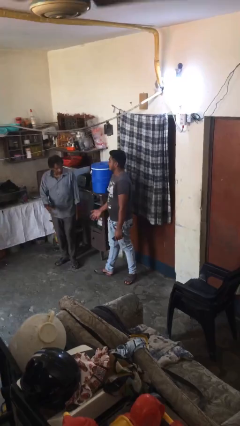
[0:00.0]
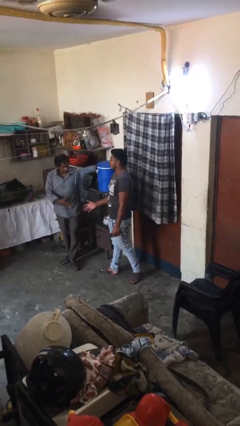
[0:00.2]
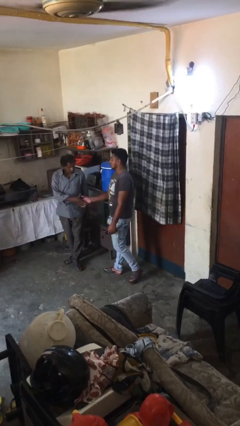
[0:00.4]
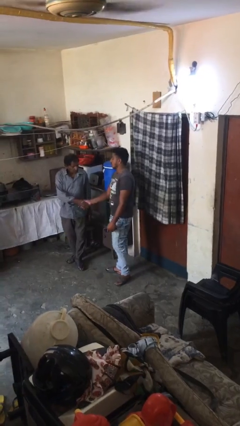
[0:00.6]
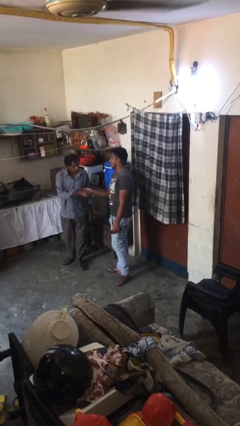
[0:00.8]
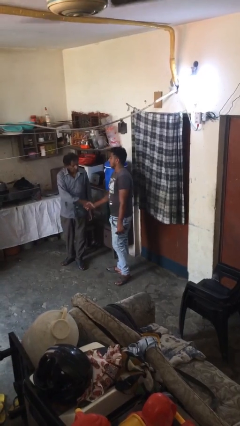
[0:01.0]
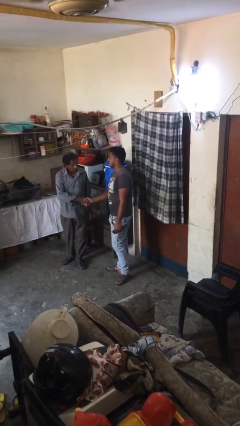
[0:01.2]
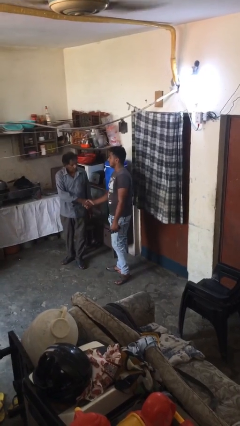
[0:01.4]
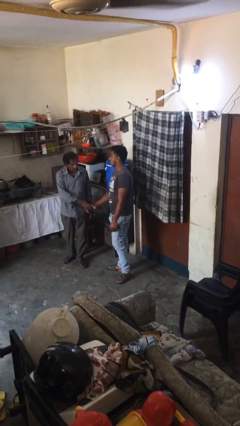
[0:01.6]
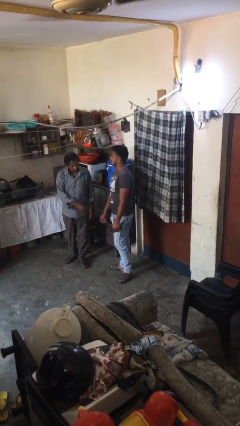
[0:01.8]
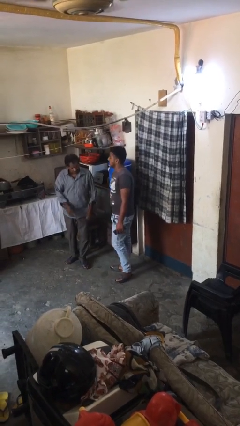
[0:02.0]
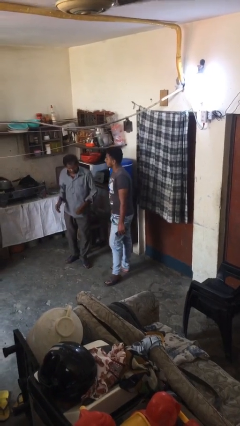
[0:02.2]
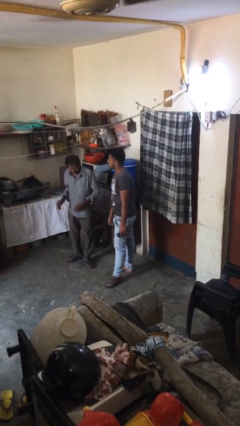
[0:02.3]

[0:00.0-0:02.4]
person shakes hand

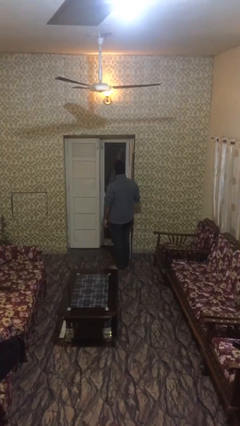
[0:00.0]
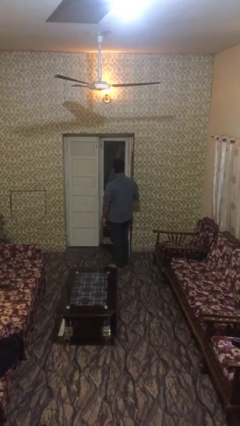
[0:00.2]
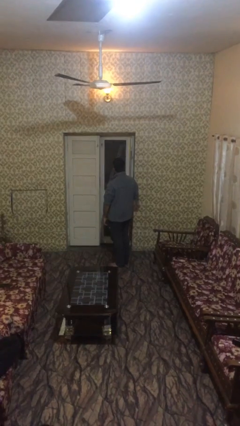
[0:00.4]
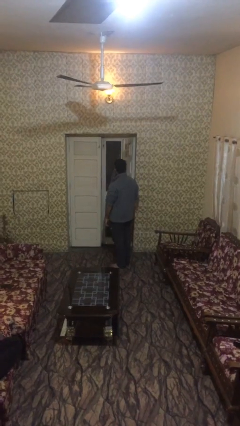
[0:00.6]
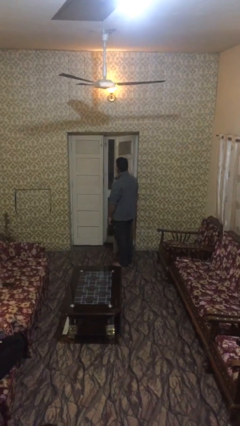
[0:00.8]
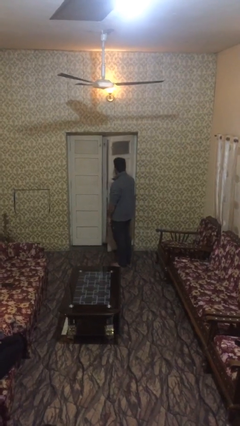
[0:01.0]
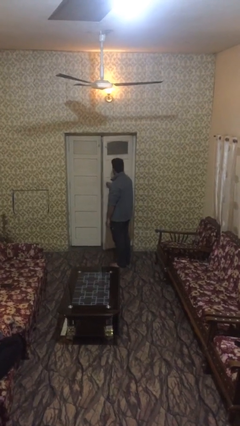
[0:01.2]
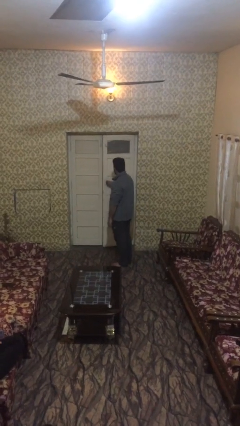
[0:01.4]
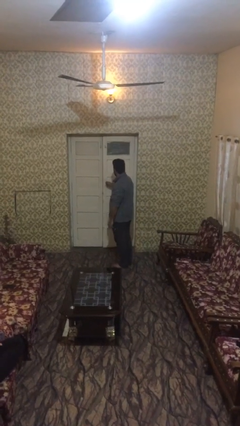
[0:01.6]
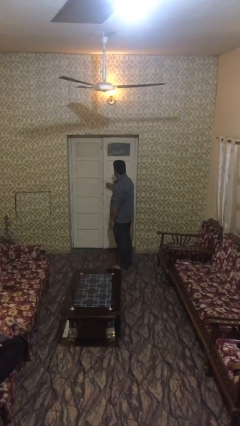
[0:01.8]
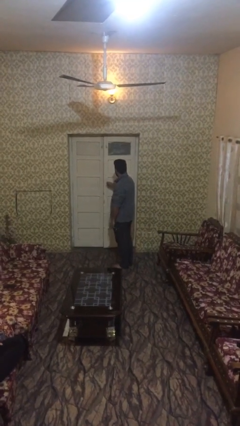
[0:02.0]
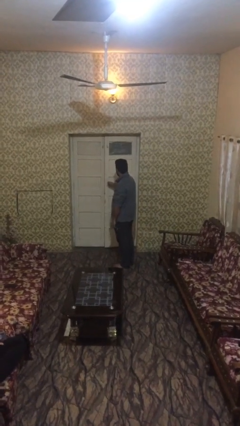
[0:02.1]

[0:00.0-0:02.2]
person closes facility door

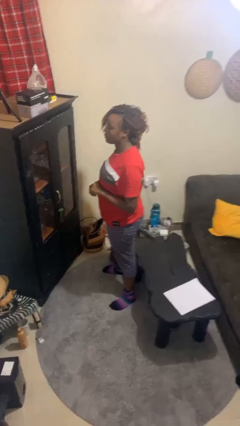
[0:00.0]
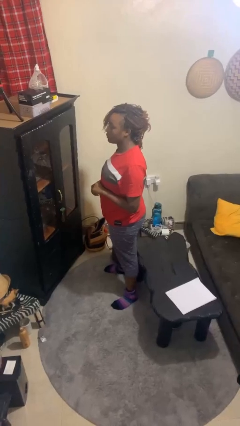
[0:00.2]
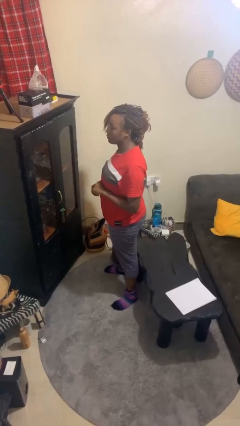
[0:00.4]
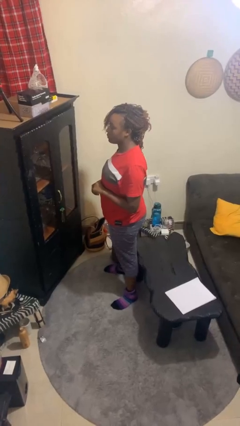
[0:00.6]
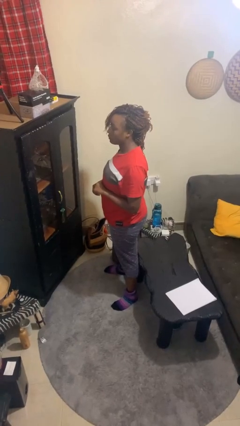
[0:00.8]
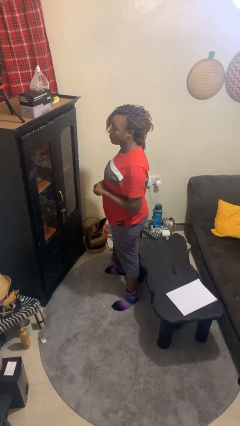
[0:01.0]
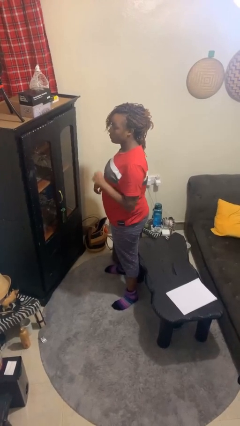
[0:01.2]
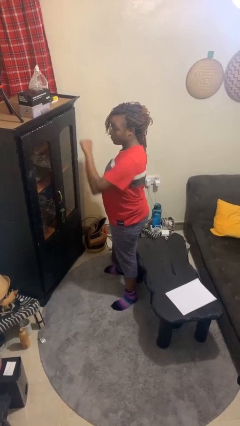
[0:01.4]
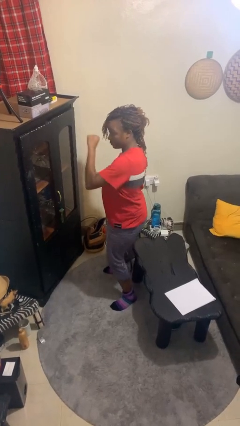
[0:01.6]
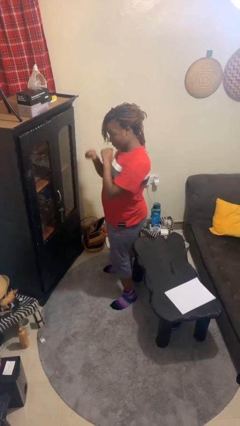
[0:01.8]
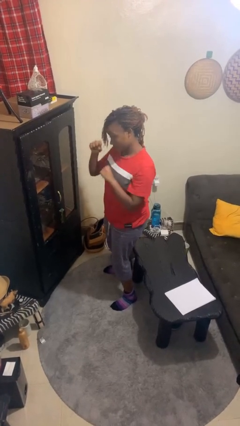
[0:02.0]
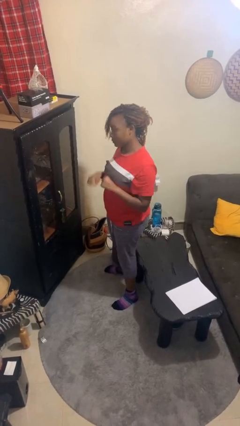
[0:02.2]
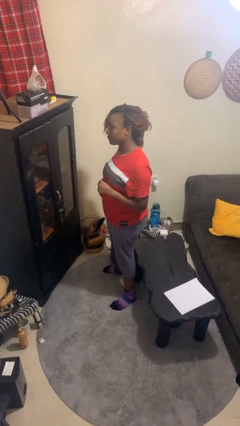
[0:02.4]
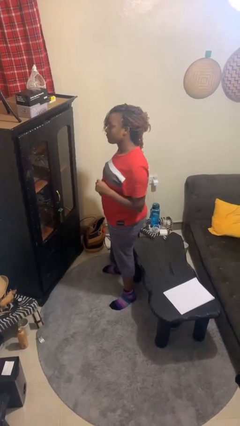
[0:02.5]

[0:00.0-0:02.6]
person punches

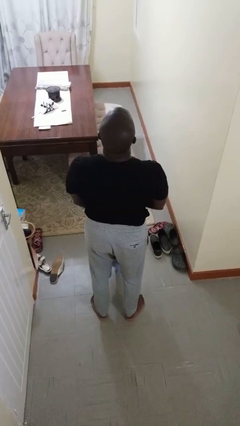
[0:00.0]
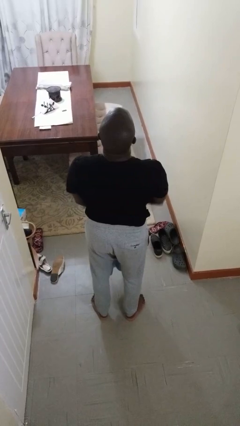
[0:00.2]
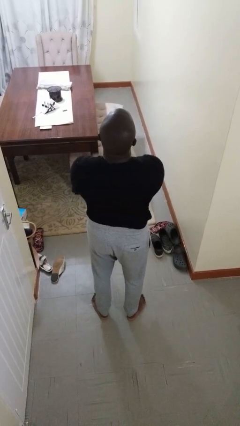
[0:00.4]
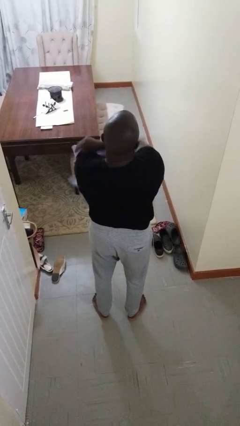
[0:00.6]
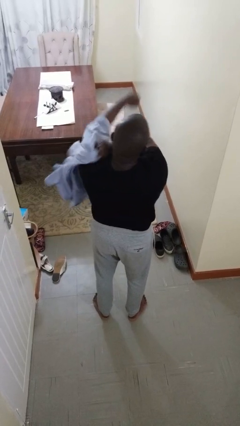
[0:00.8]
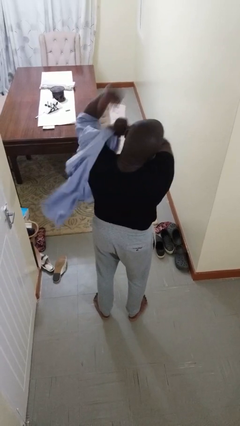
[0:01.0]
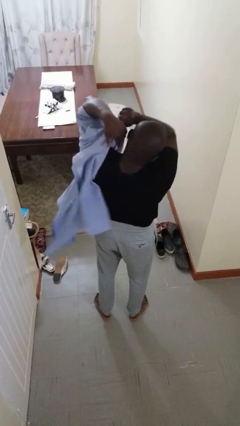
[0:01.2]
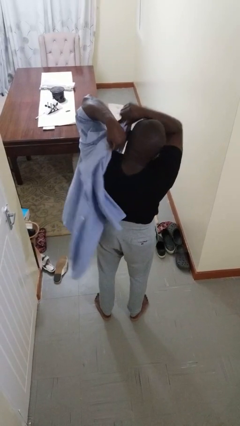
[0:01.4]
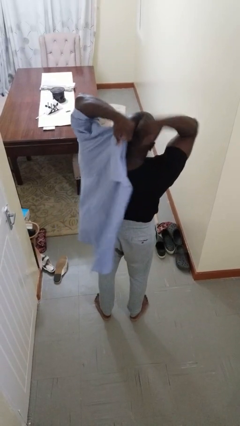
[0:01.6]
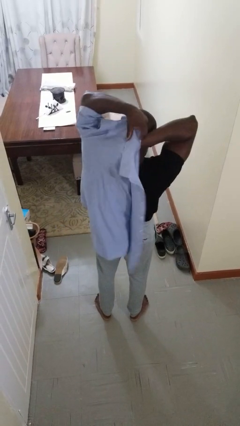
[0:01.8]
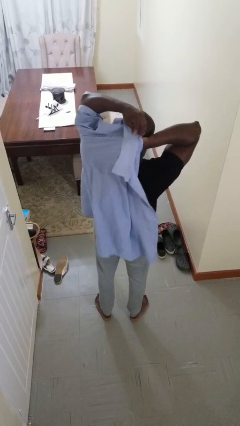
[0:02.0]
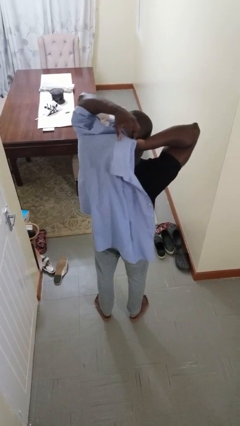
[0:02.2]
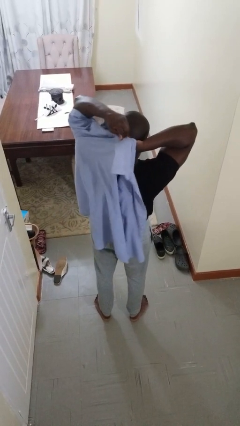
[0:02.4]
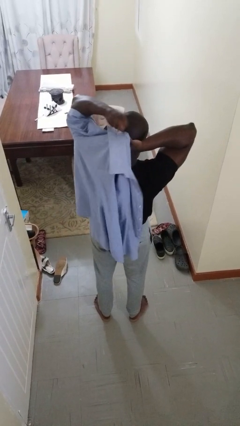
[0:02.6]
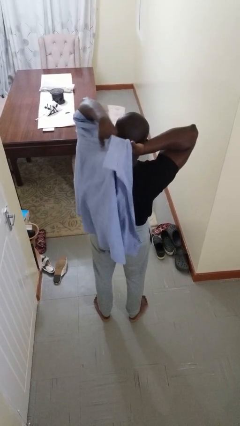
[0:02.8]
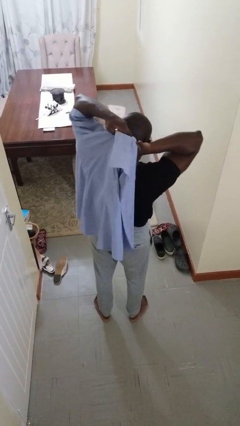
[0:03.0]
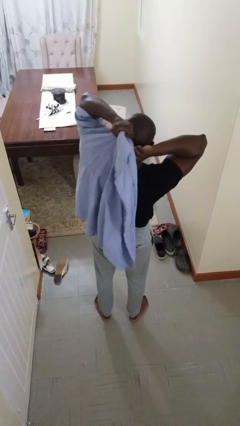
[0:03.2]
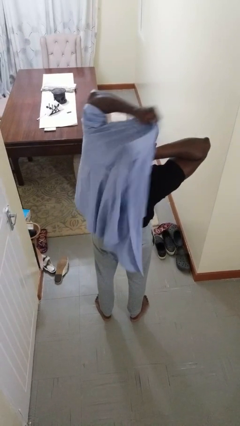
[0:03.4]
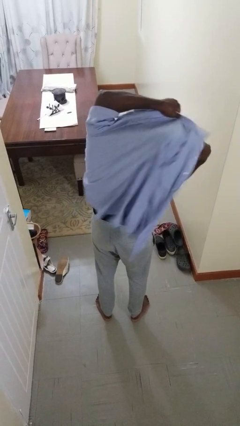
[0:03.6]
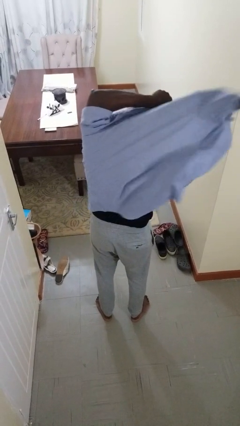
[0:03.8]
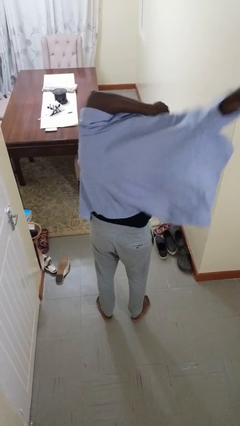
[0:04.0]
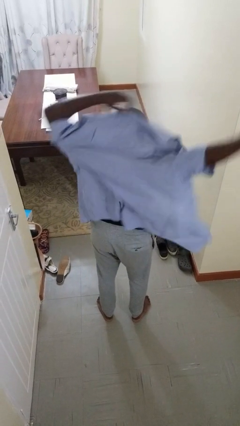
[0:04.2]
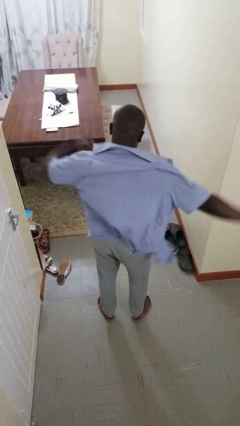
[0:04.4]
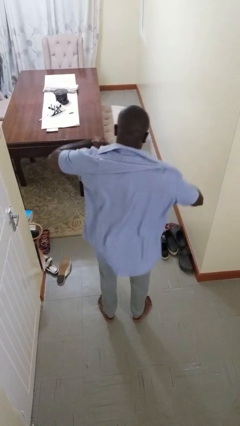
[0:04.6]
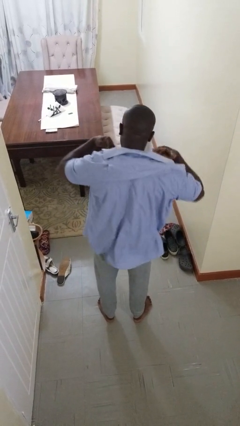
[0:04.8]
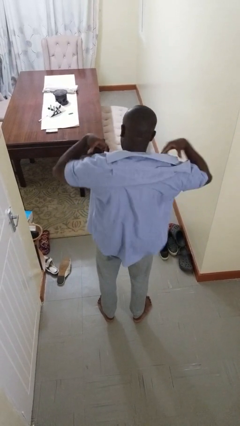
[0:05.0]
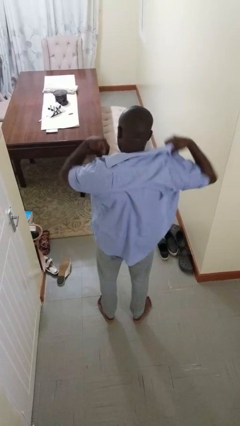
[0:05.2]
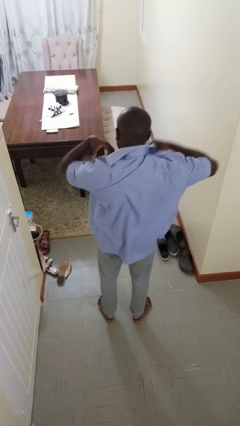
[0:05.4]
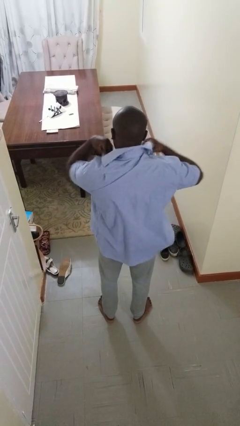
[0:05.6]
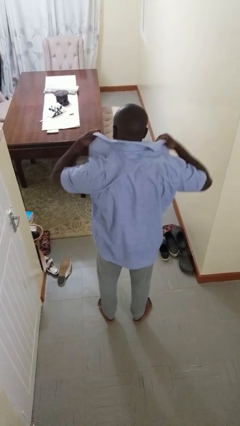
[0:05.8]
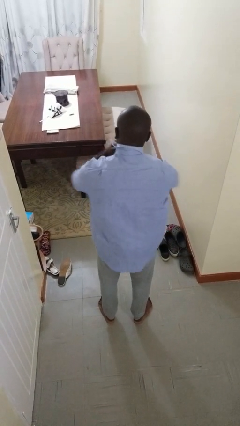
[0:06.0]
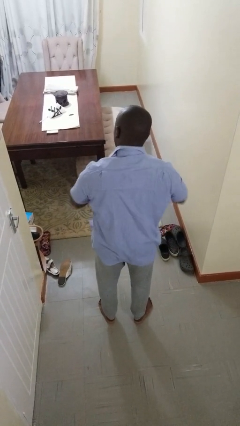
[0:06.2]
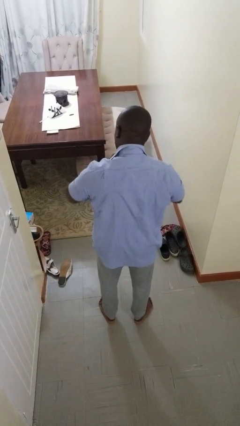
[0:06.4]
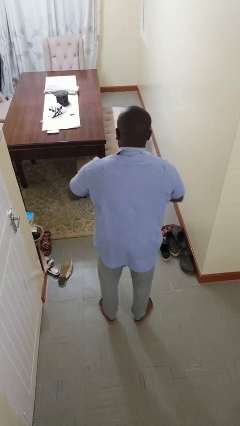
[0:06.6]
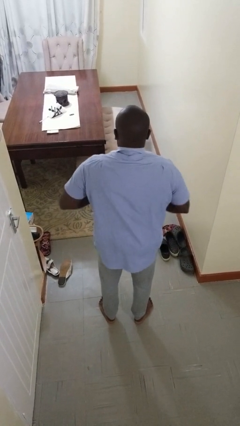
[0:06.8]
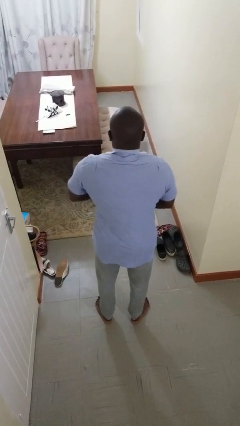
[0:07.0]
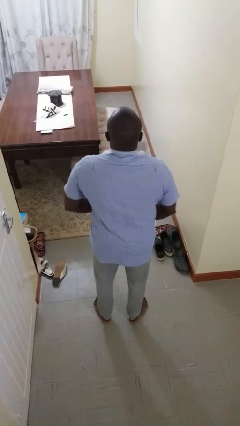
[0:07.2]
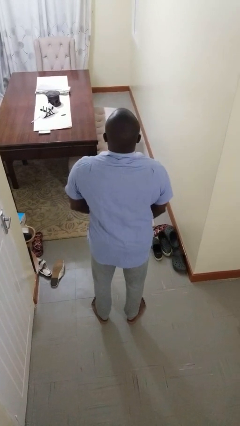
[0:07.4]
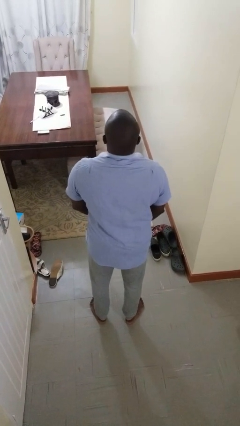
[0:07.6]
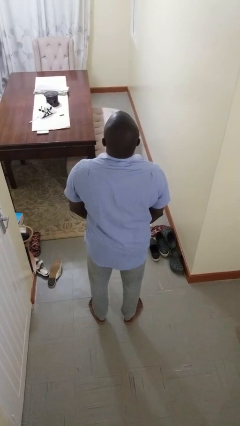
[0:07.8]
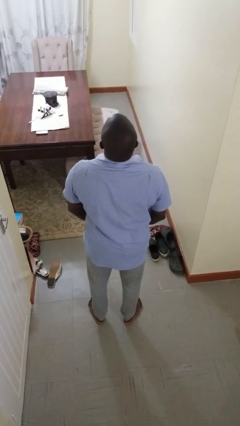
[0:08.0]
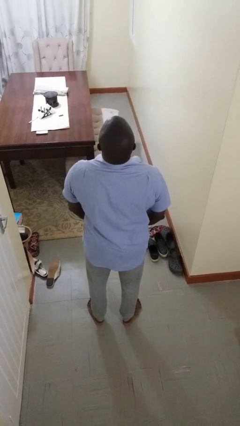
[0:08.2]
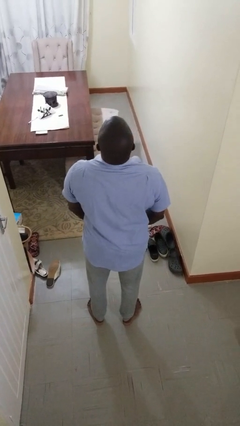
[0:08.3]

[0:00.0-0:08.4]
person puts on shirt

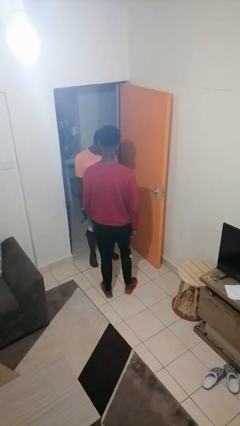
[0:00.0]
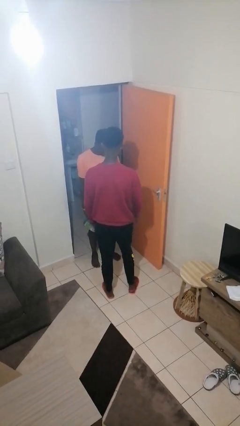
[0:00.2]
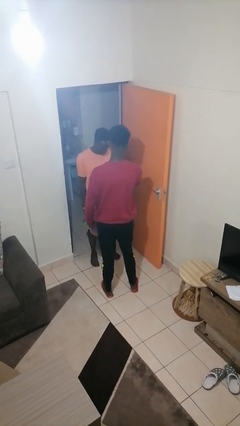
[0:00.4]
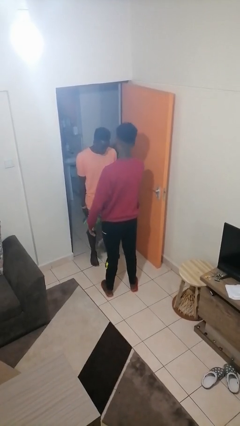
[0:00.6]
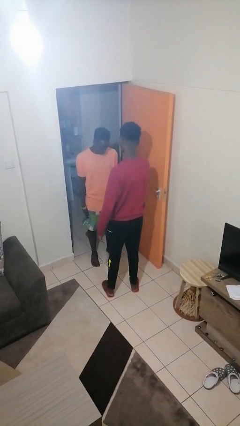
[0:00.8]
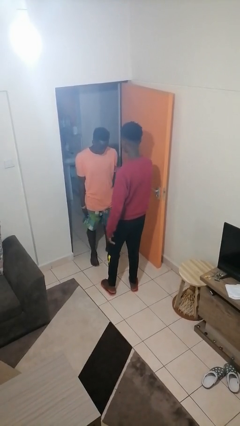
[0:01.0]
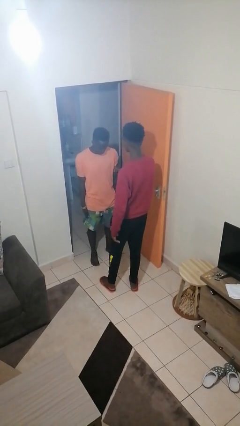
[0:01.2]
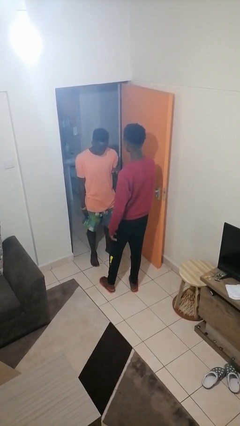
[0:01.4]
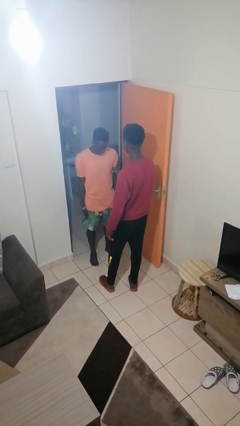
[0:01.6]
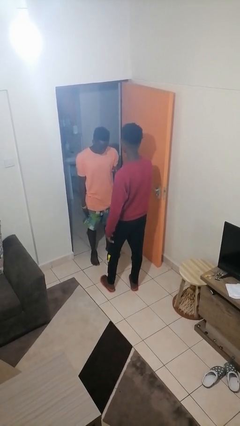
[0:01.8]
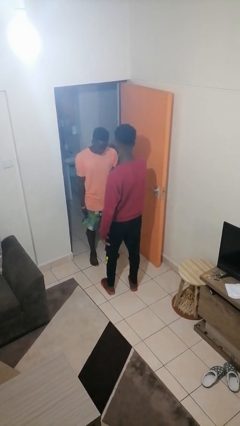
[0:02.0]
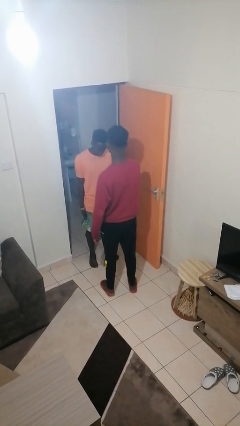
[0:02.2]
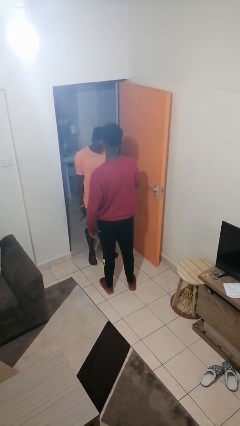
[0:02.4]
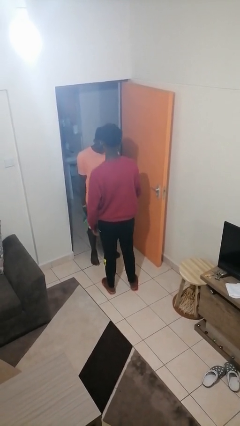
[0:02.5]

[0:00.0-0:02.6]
person grabs person by bicep
